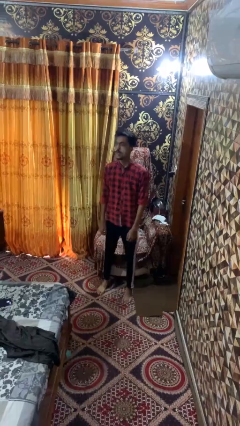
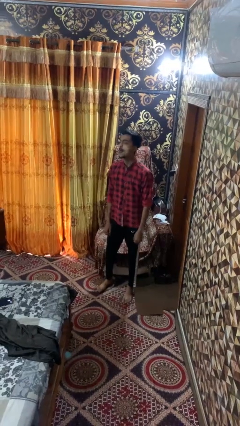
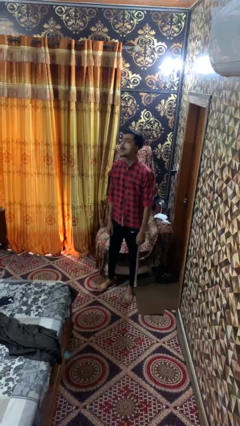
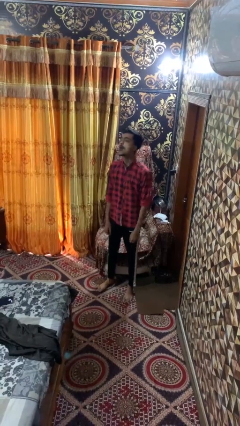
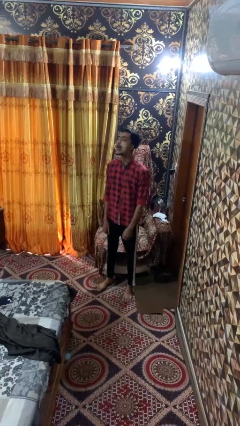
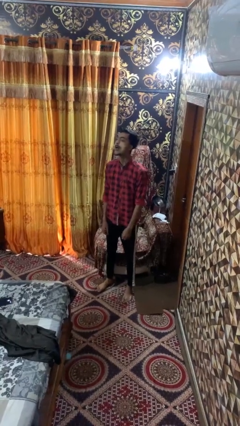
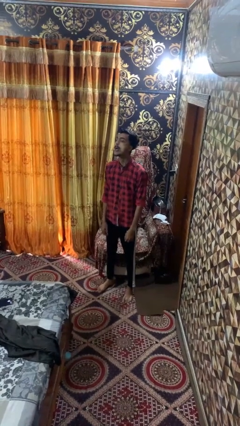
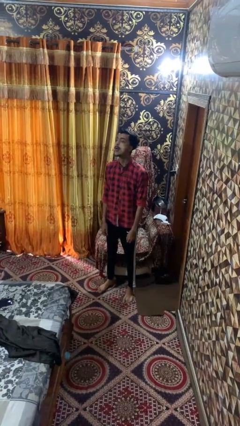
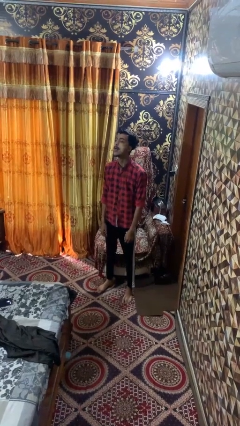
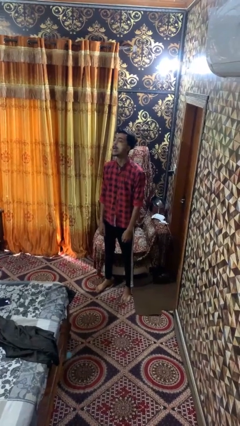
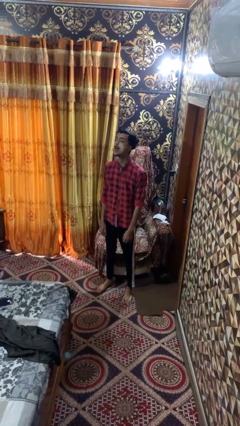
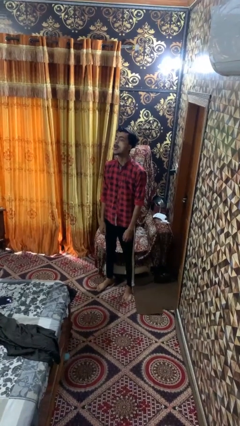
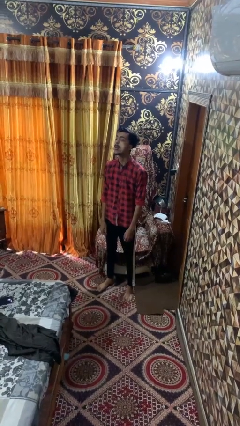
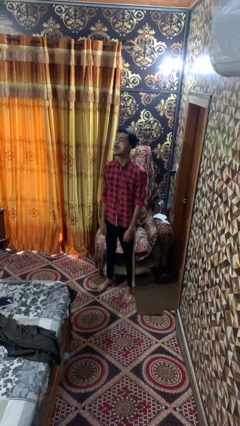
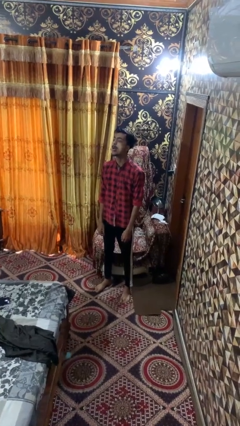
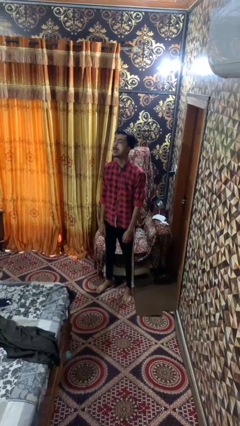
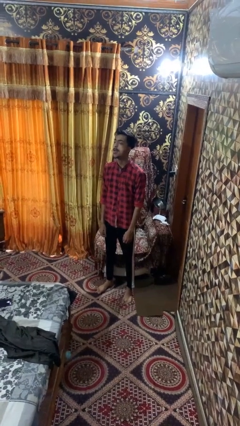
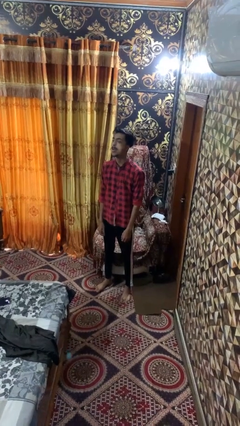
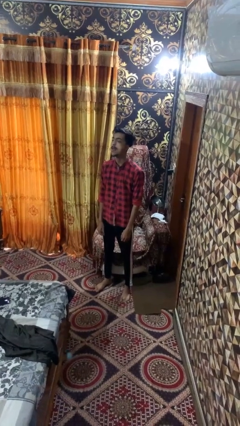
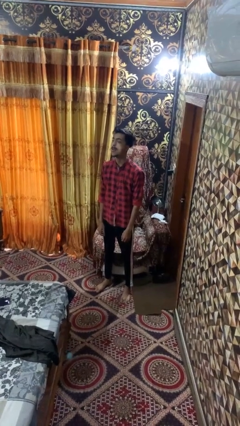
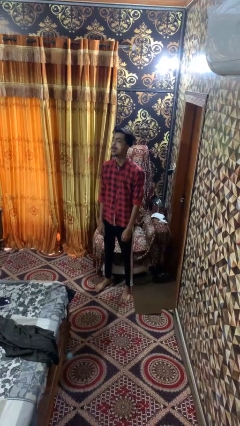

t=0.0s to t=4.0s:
person sticks out tongue

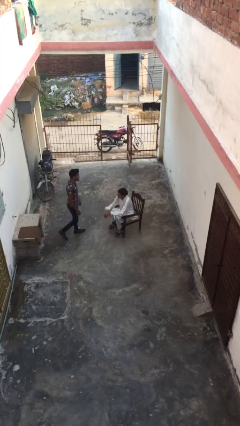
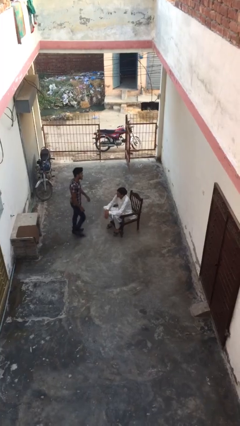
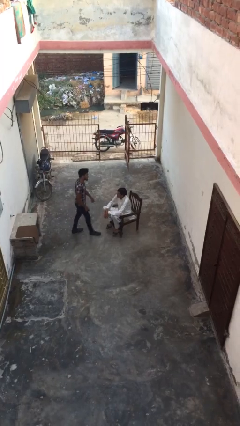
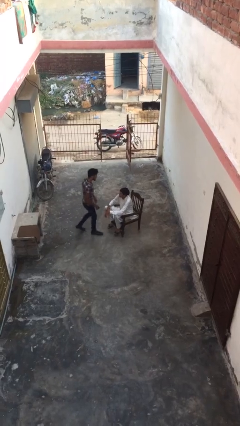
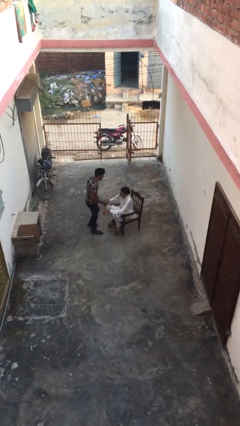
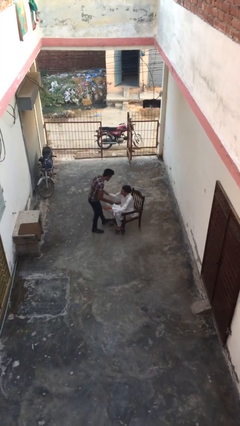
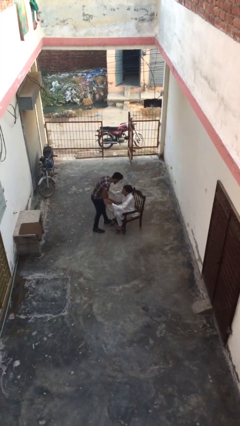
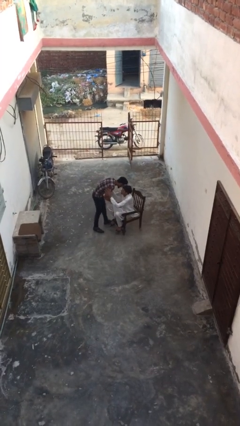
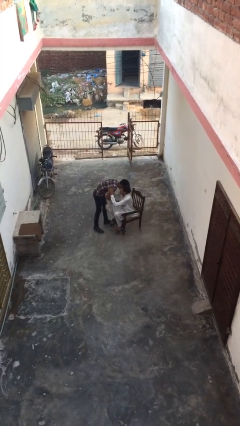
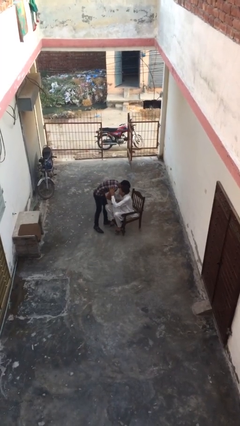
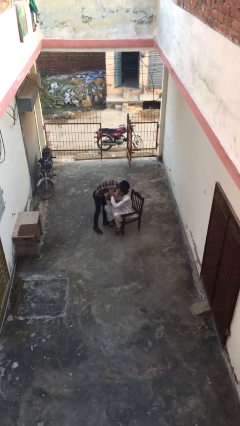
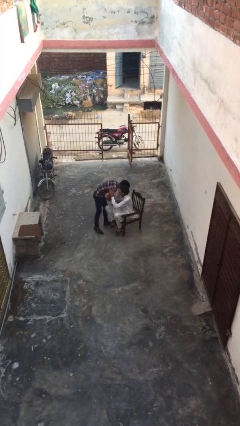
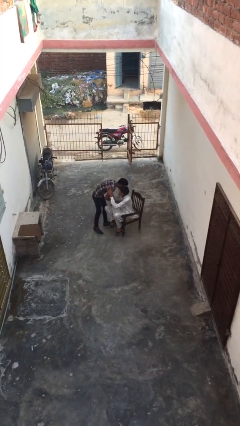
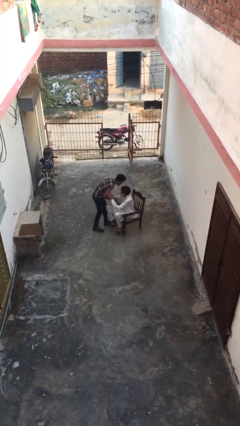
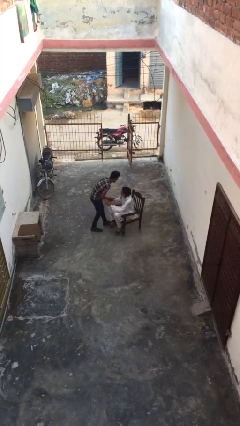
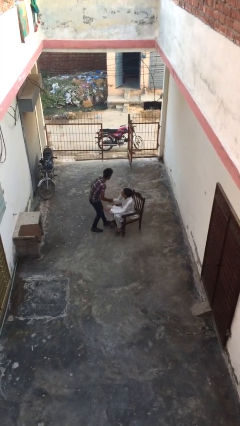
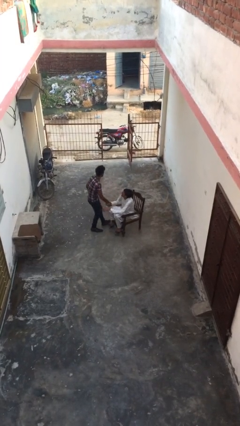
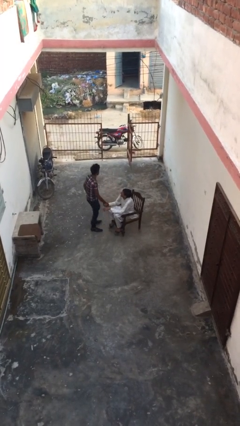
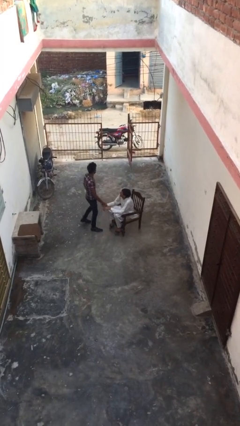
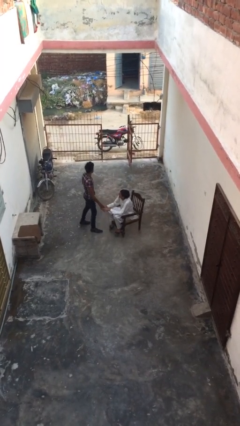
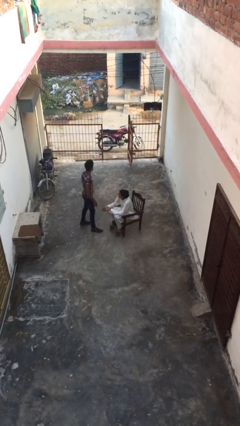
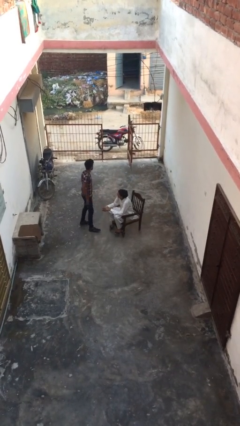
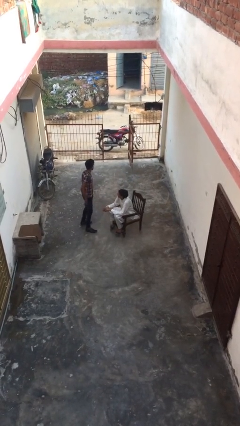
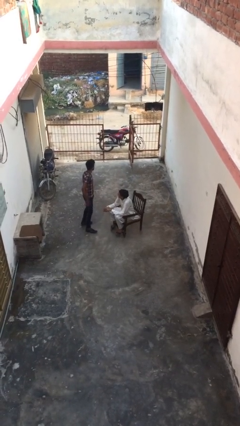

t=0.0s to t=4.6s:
person embraces person

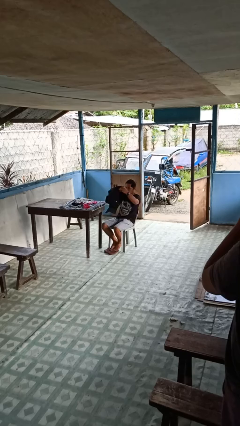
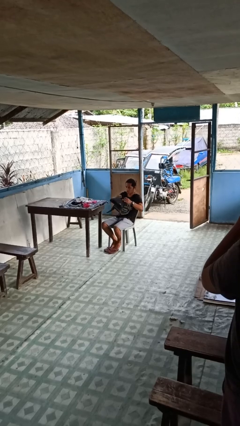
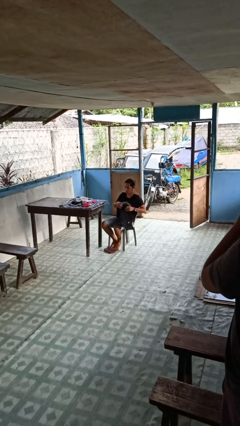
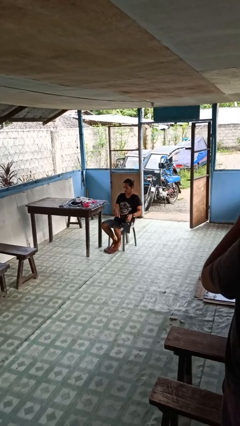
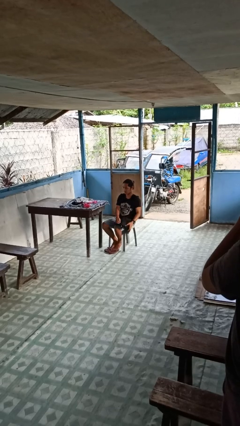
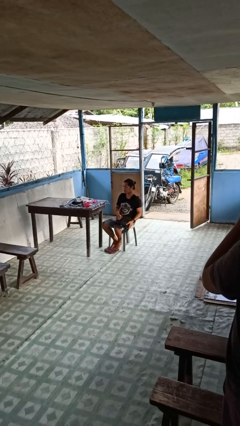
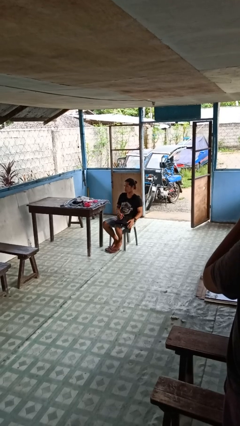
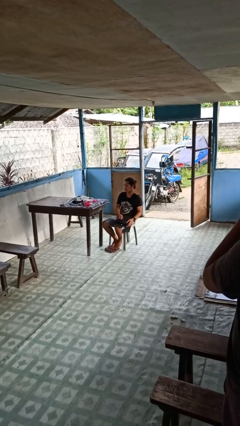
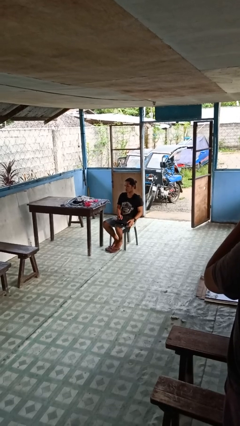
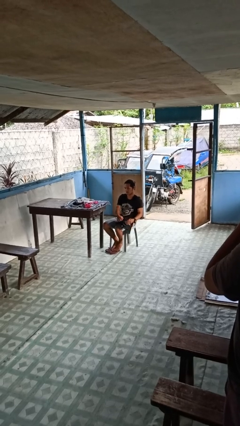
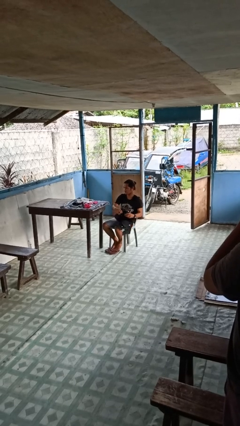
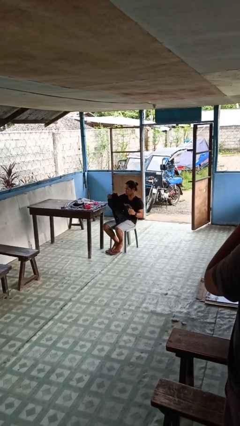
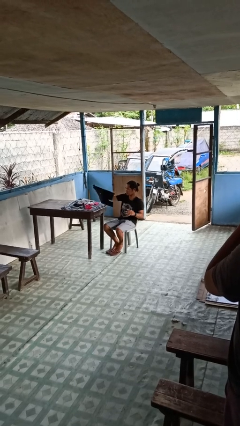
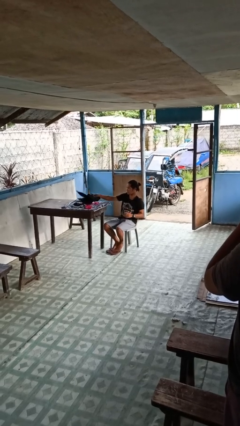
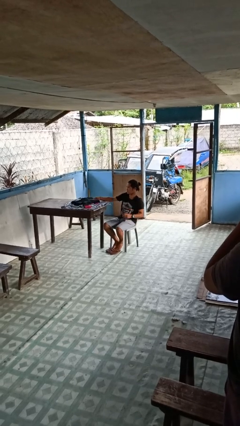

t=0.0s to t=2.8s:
person folds pants

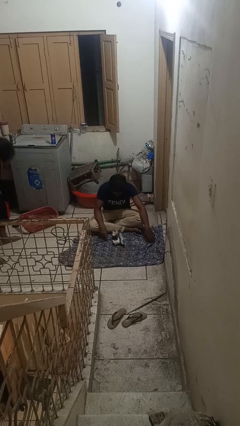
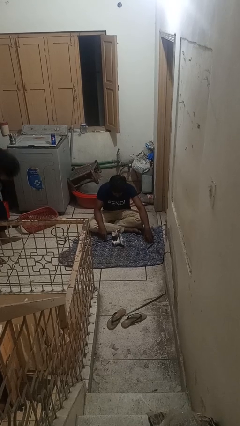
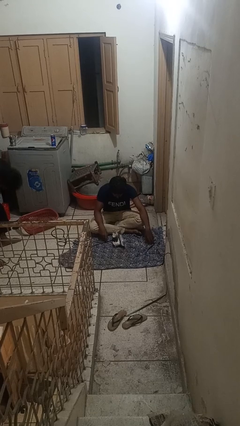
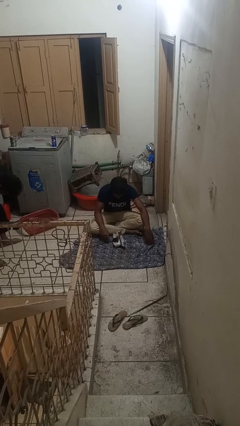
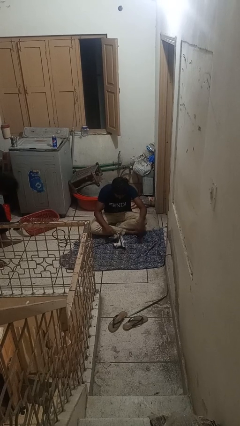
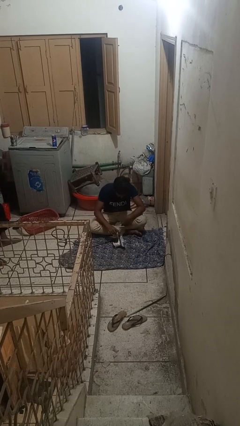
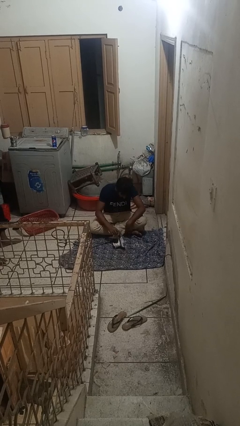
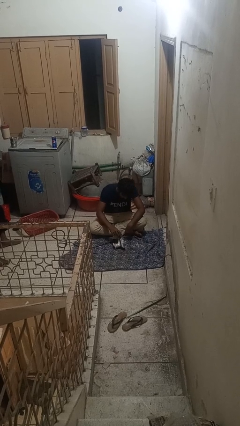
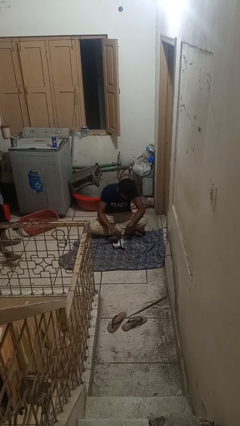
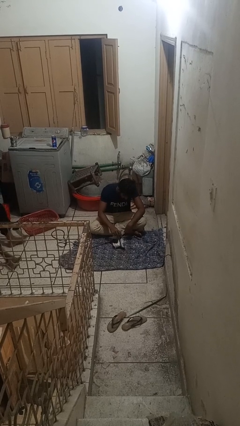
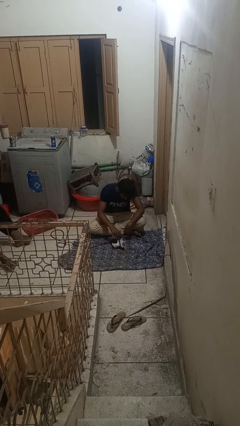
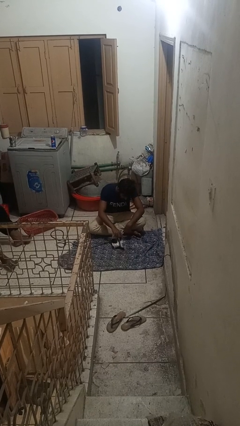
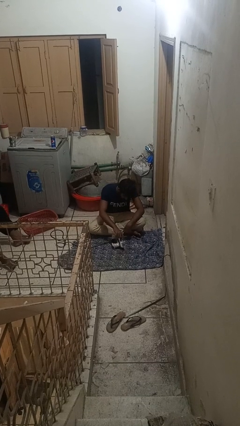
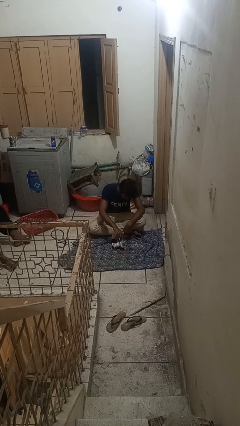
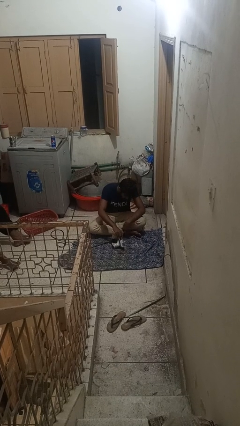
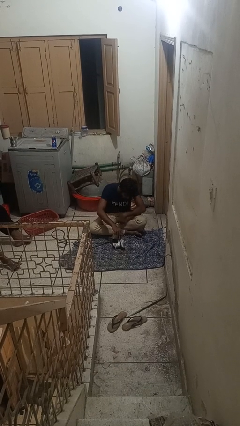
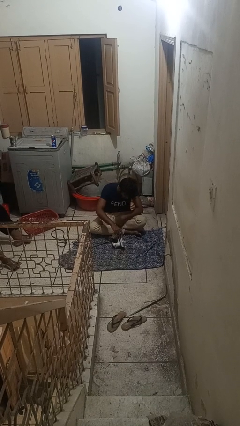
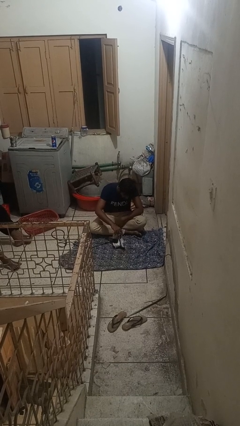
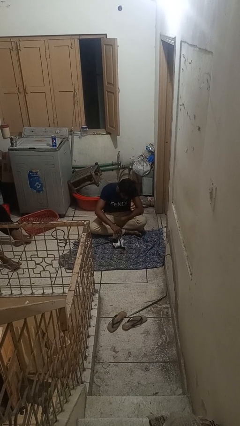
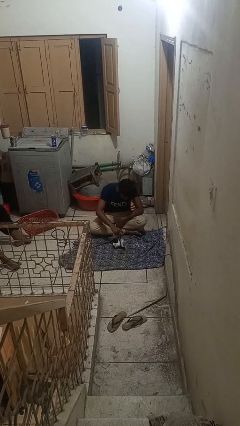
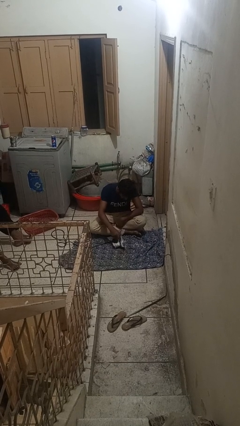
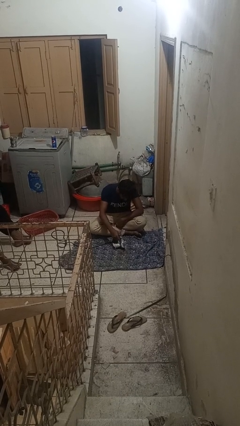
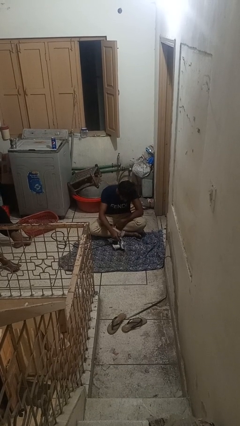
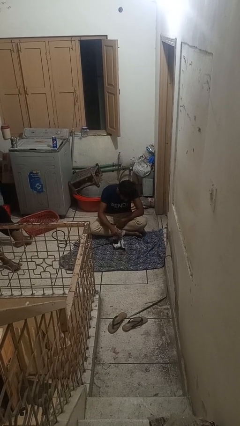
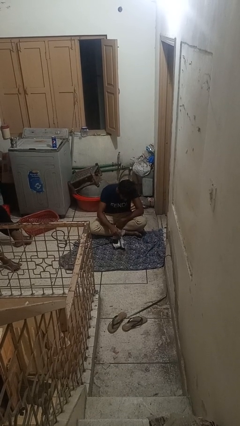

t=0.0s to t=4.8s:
person taps object with finger

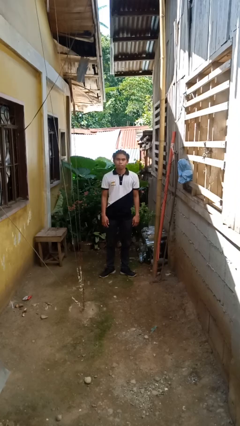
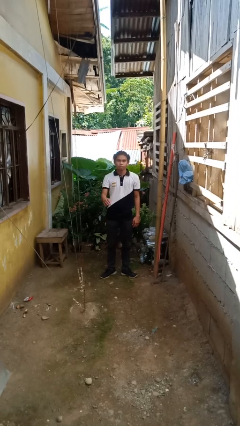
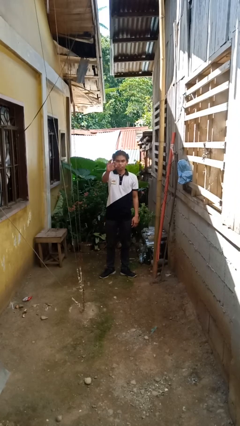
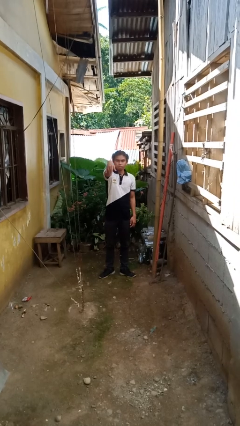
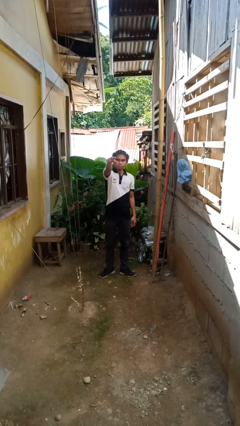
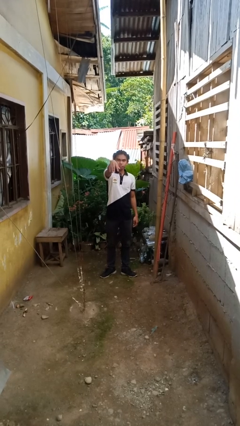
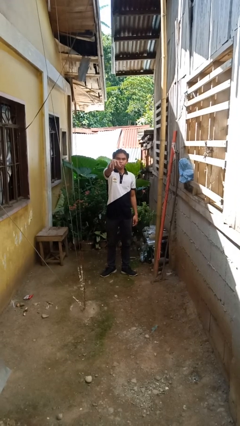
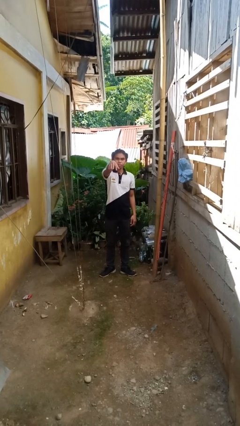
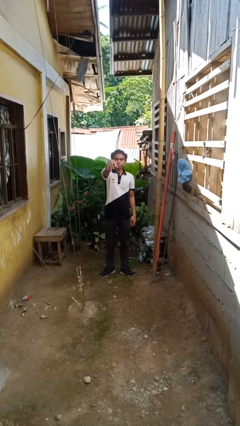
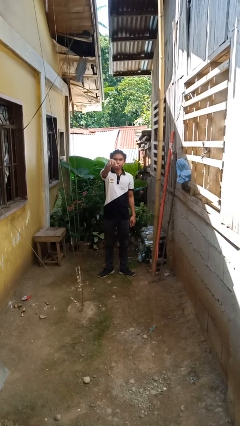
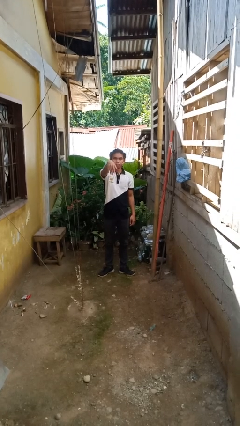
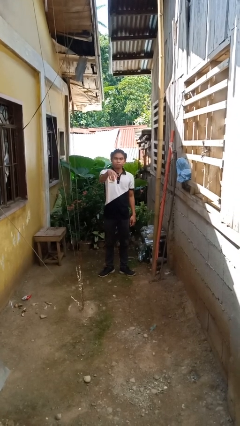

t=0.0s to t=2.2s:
person gestures come here
